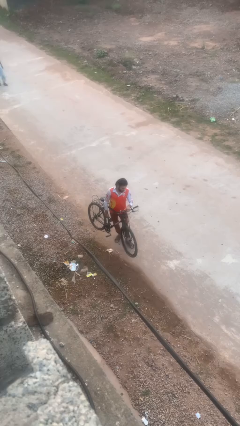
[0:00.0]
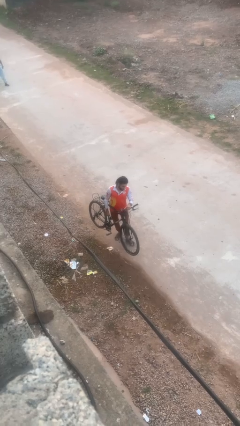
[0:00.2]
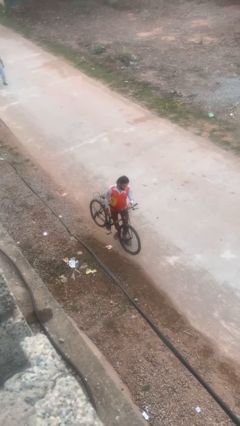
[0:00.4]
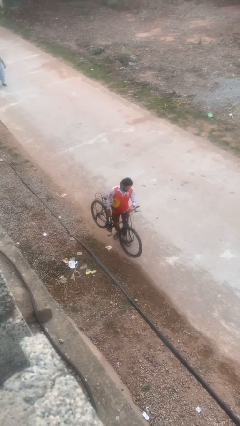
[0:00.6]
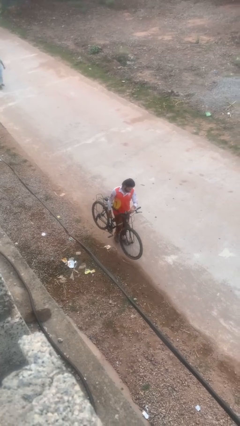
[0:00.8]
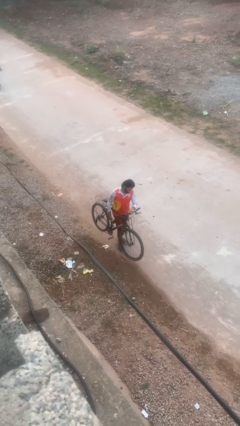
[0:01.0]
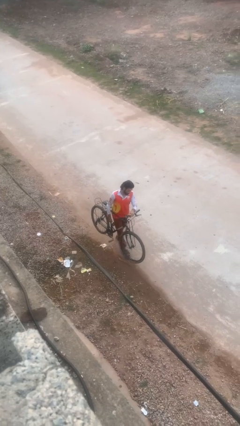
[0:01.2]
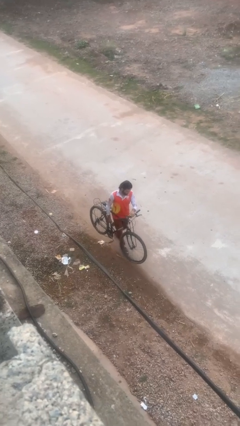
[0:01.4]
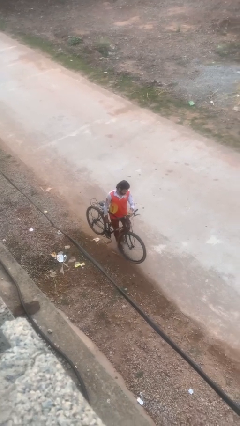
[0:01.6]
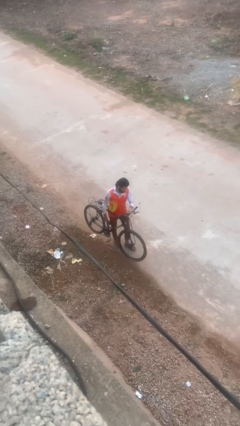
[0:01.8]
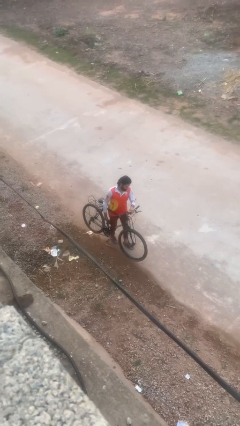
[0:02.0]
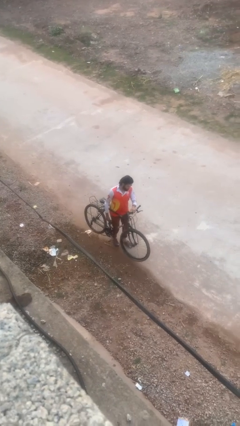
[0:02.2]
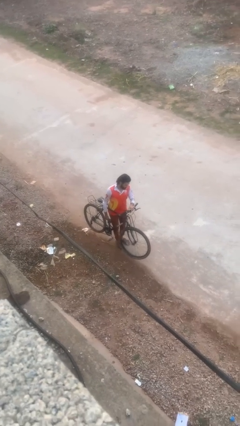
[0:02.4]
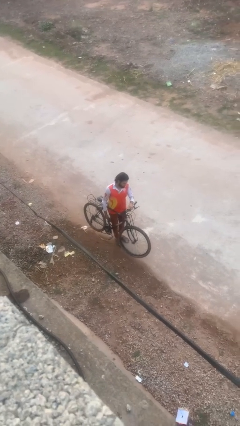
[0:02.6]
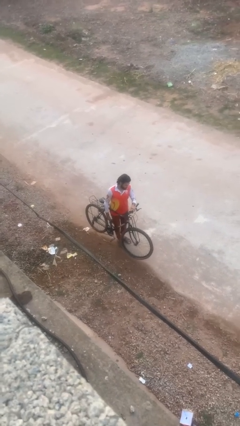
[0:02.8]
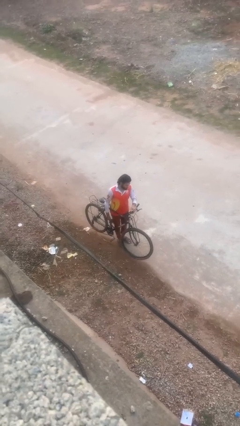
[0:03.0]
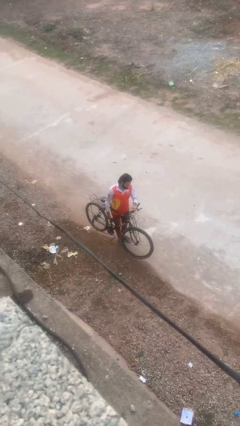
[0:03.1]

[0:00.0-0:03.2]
person carries bicycle

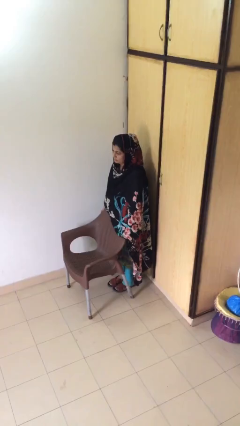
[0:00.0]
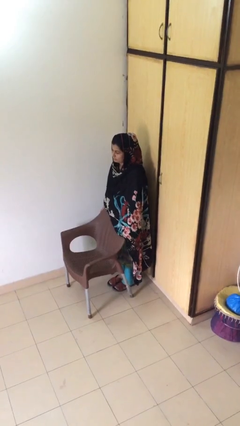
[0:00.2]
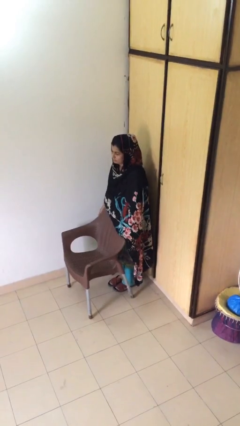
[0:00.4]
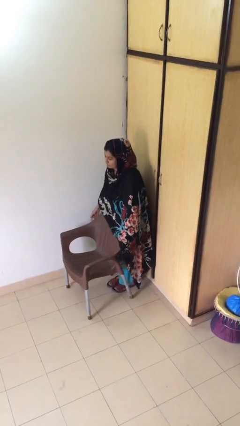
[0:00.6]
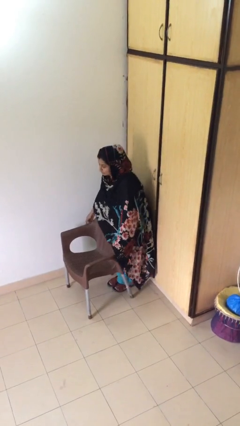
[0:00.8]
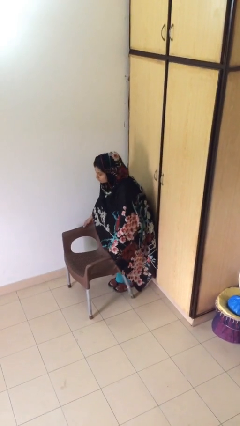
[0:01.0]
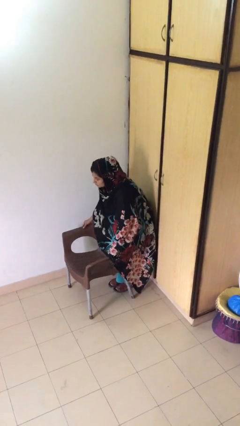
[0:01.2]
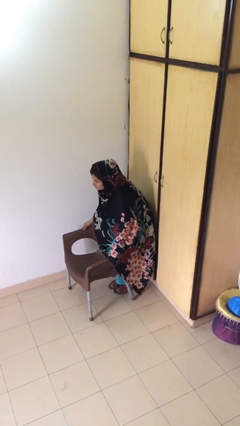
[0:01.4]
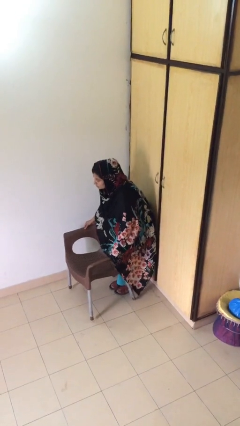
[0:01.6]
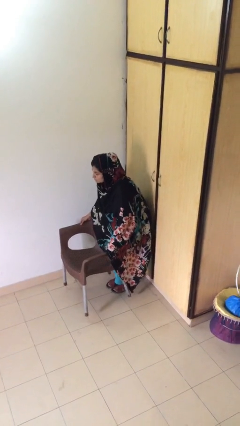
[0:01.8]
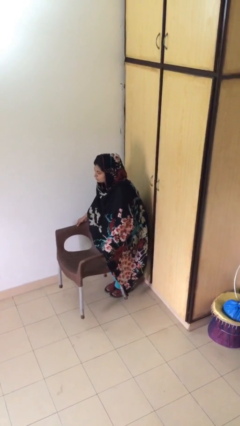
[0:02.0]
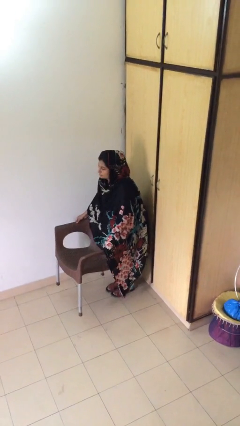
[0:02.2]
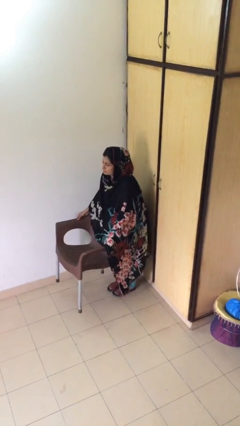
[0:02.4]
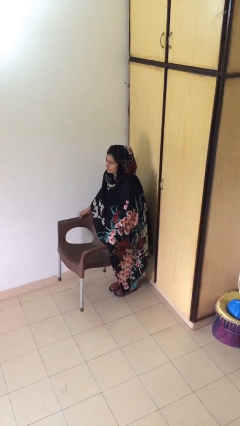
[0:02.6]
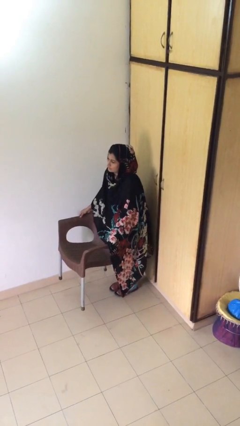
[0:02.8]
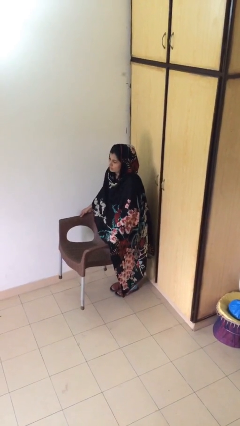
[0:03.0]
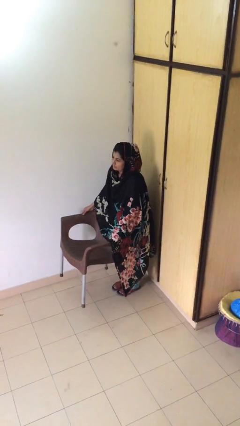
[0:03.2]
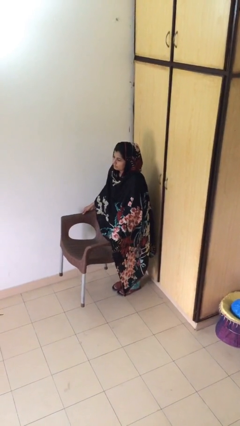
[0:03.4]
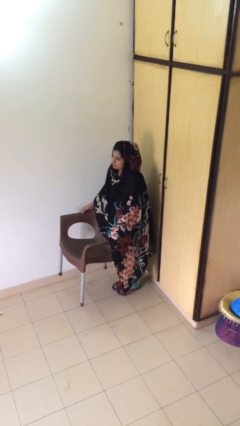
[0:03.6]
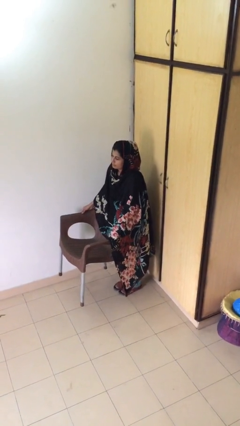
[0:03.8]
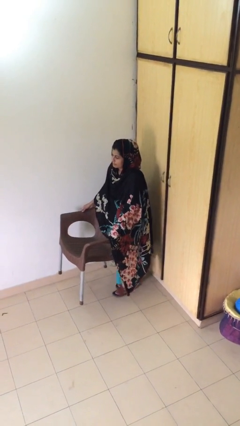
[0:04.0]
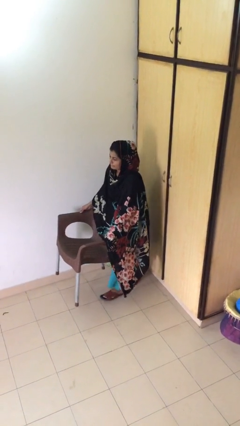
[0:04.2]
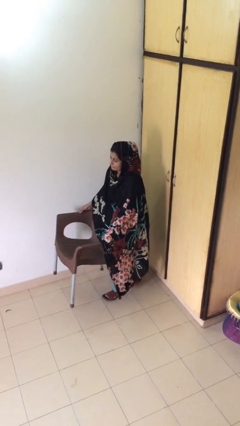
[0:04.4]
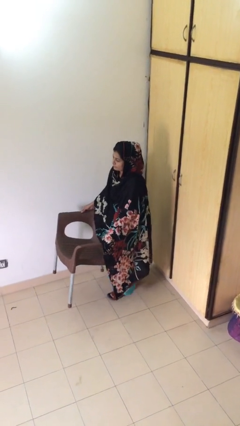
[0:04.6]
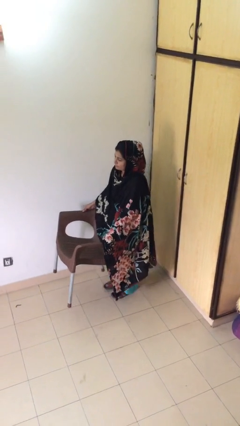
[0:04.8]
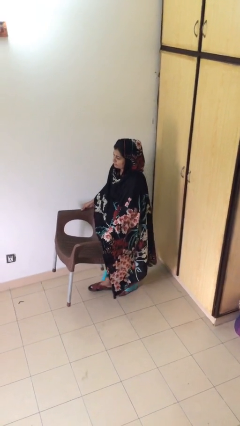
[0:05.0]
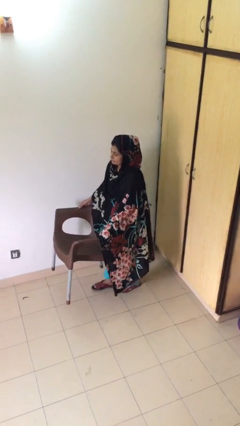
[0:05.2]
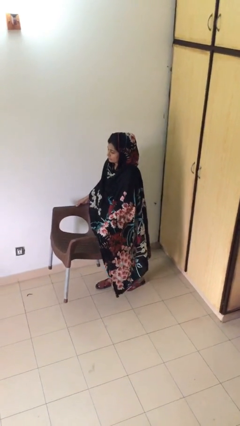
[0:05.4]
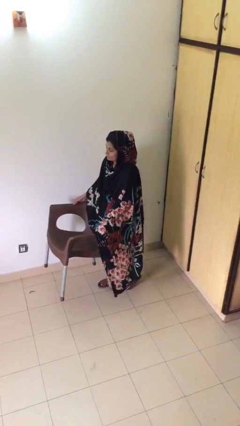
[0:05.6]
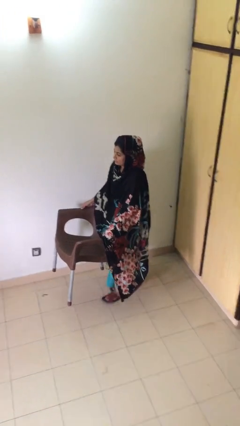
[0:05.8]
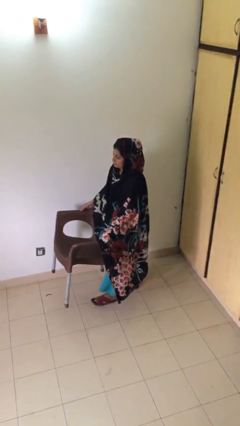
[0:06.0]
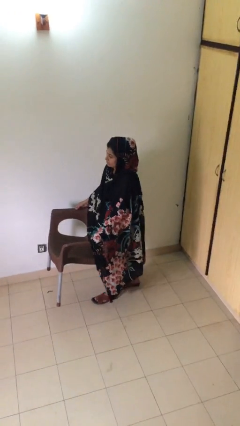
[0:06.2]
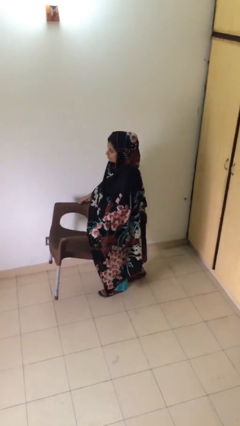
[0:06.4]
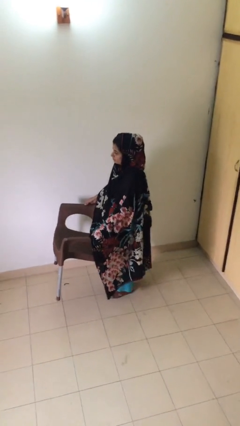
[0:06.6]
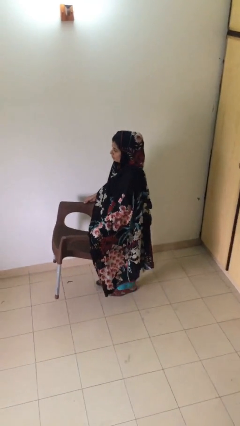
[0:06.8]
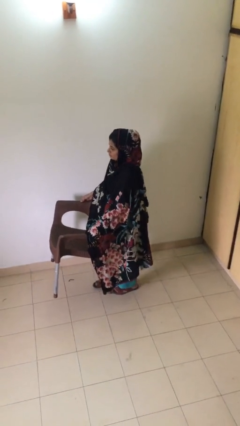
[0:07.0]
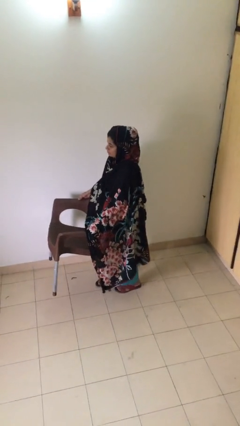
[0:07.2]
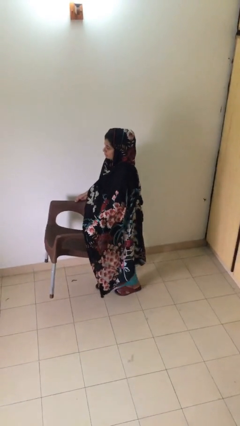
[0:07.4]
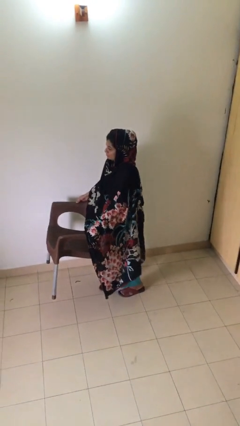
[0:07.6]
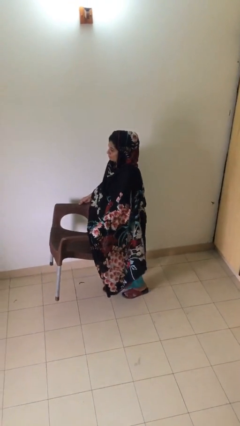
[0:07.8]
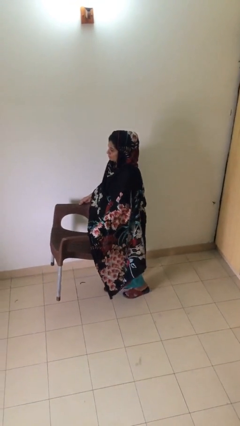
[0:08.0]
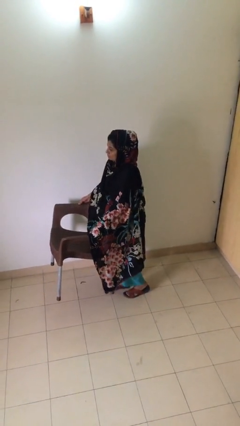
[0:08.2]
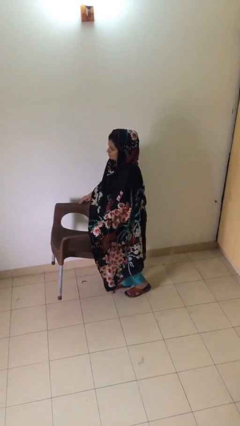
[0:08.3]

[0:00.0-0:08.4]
person carries heavy object

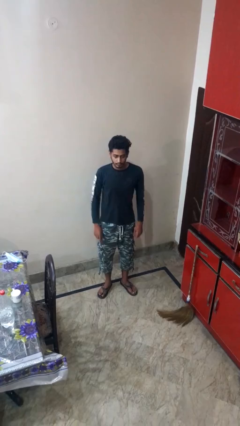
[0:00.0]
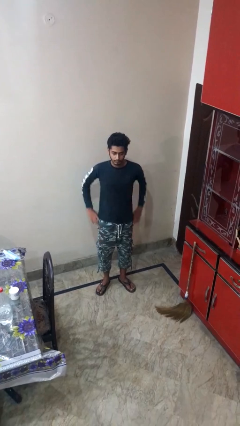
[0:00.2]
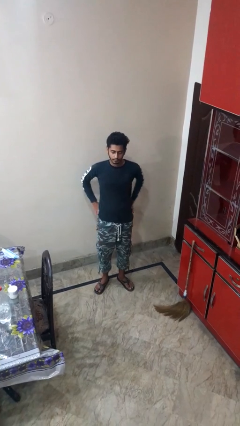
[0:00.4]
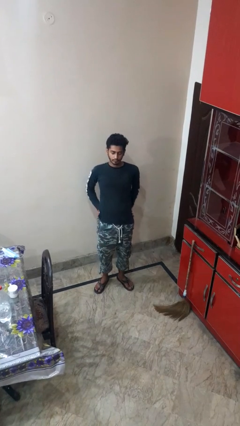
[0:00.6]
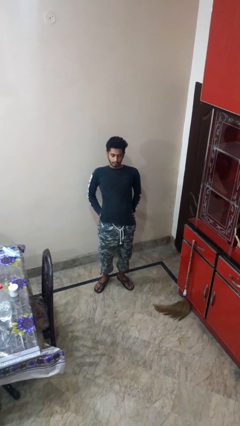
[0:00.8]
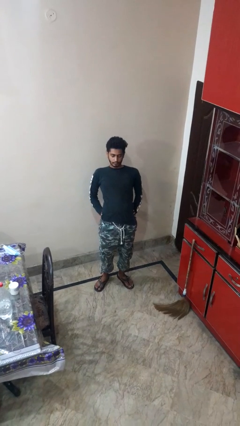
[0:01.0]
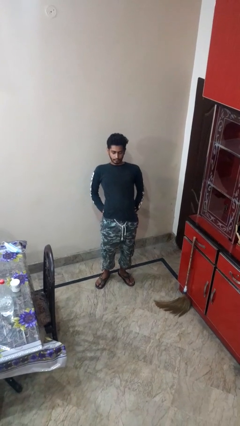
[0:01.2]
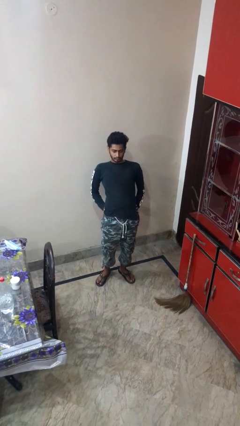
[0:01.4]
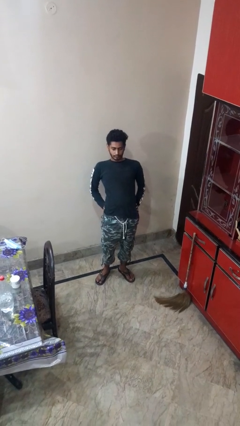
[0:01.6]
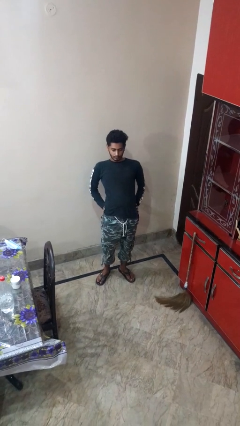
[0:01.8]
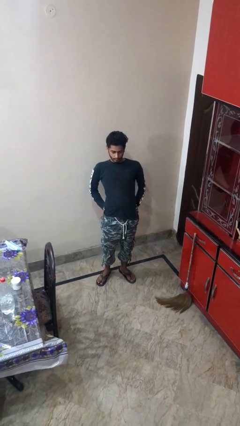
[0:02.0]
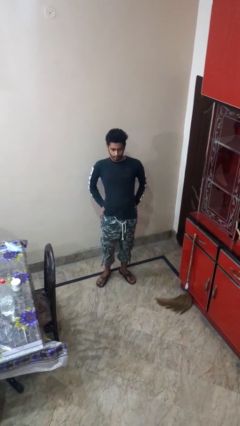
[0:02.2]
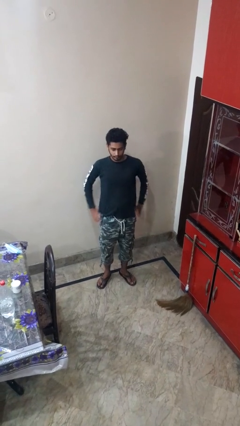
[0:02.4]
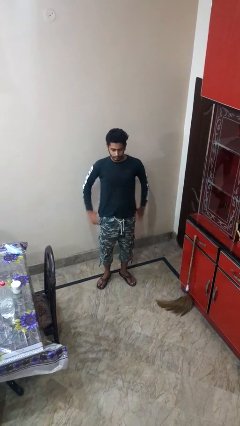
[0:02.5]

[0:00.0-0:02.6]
person stretches back

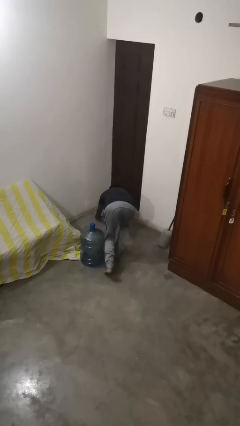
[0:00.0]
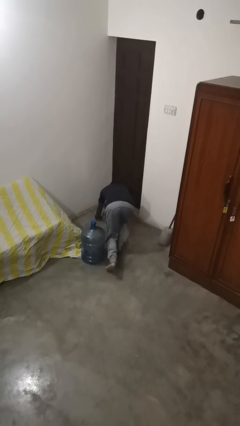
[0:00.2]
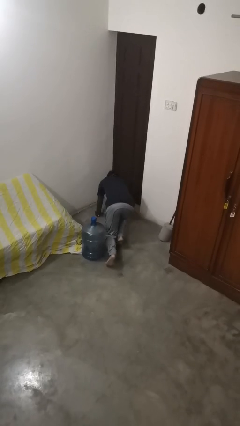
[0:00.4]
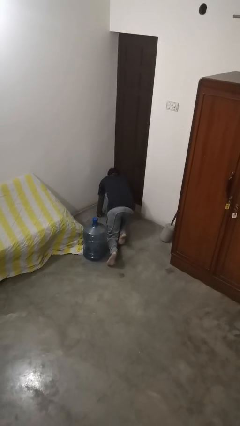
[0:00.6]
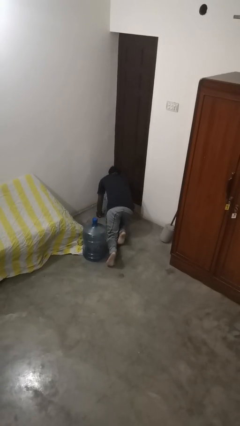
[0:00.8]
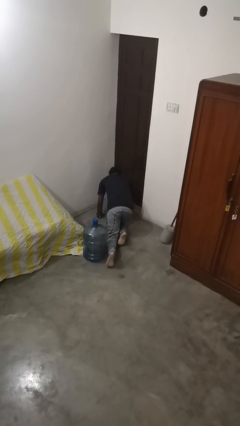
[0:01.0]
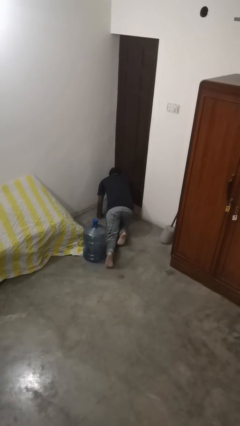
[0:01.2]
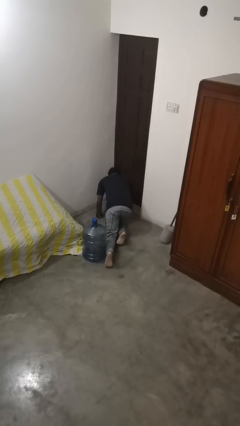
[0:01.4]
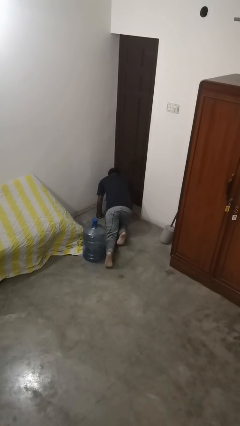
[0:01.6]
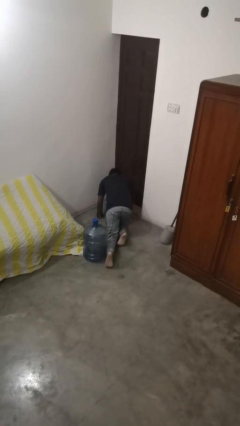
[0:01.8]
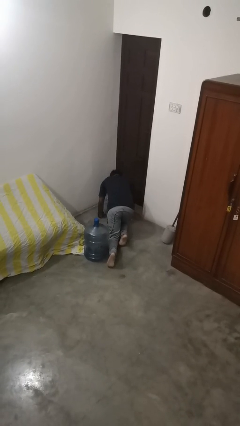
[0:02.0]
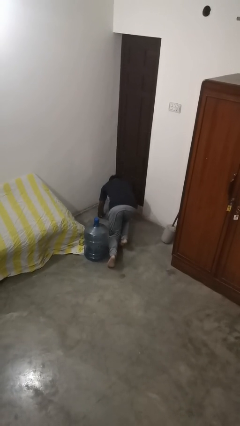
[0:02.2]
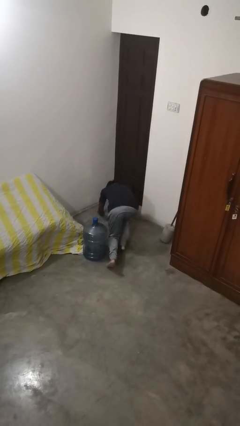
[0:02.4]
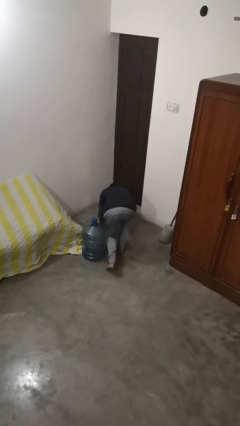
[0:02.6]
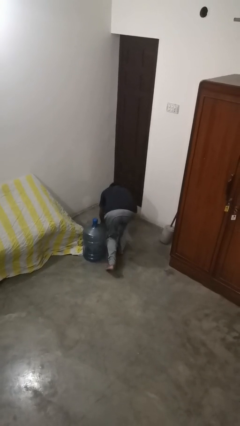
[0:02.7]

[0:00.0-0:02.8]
person lies down on floor

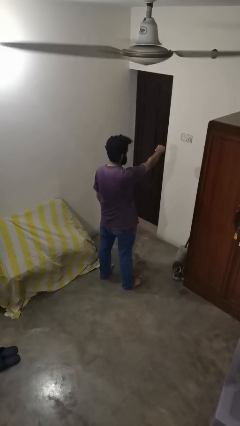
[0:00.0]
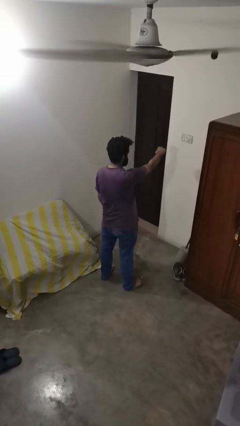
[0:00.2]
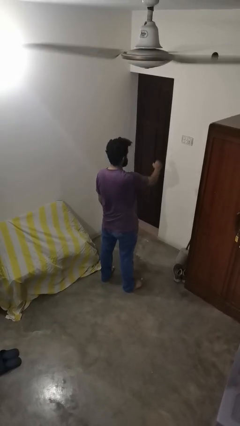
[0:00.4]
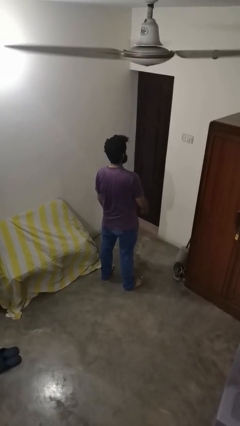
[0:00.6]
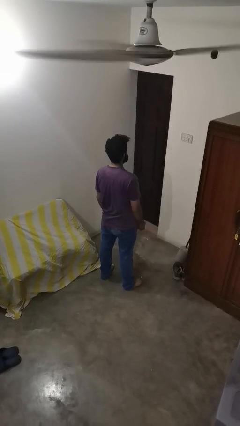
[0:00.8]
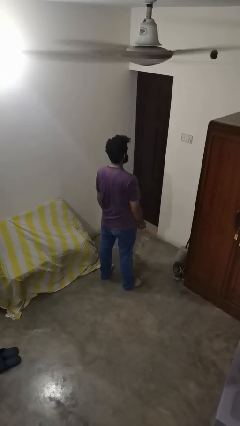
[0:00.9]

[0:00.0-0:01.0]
person punches
